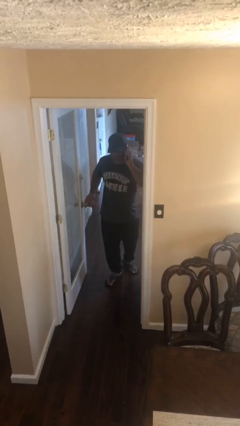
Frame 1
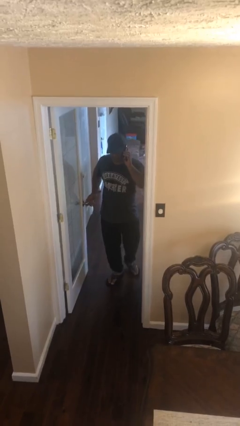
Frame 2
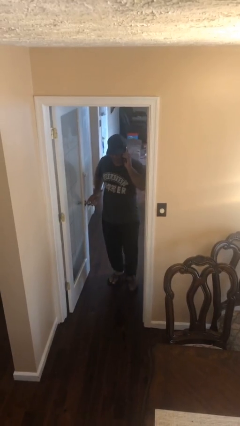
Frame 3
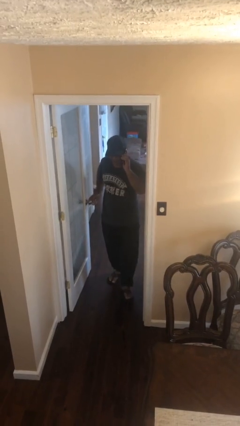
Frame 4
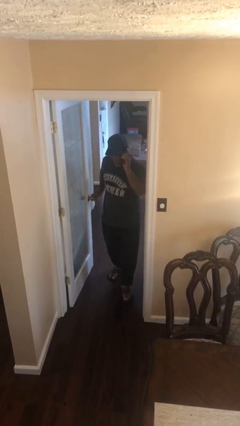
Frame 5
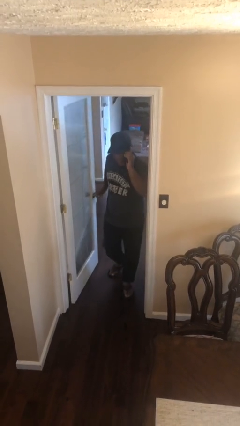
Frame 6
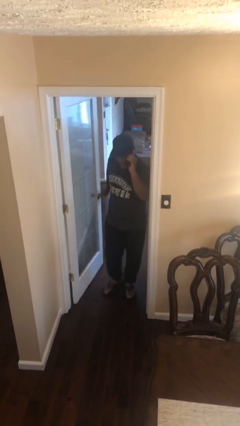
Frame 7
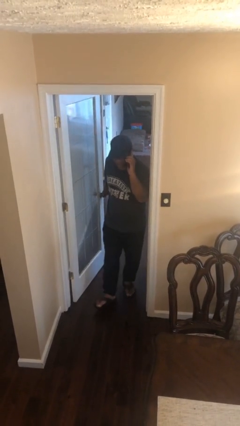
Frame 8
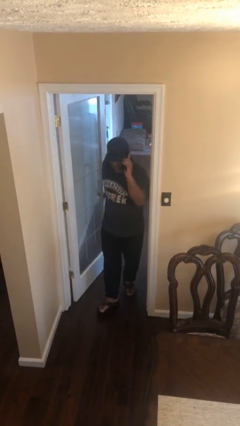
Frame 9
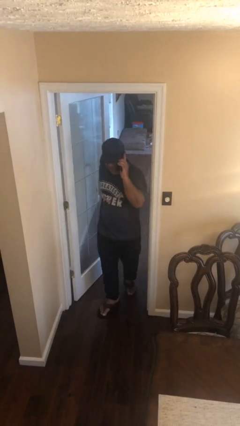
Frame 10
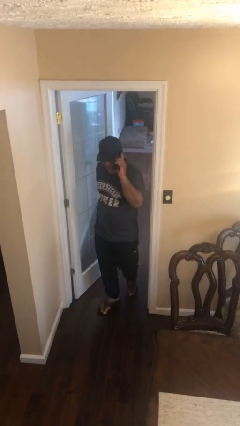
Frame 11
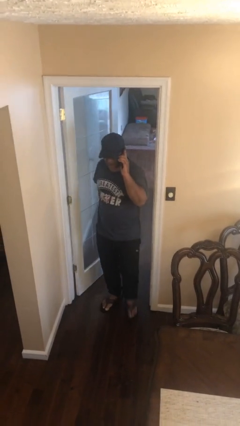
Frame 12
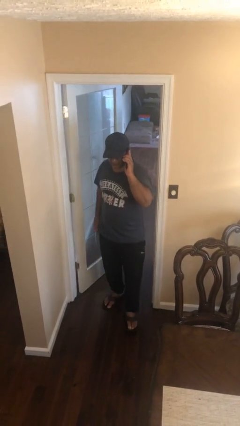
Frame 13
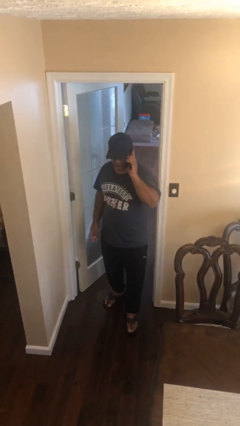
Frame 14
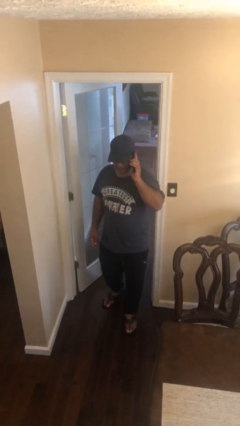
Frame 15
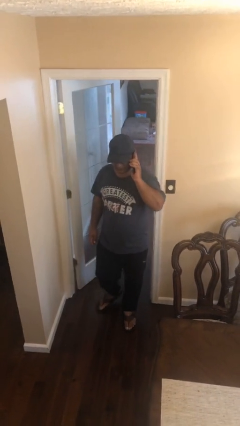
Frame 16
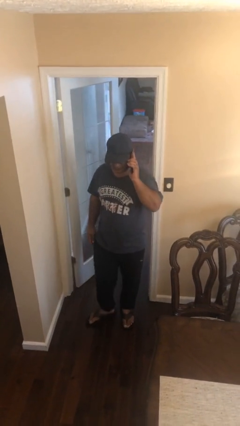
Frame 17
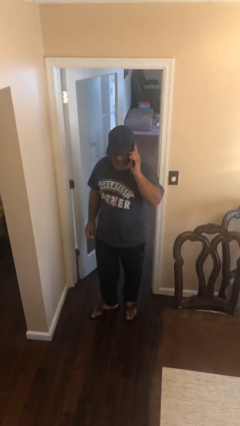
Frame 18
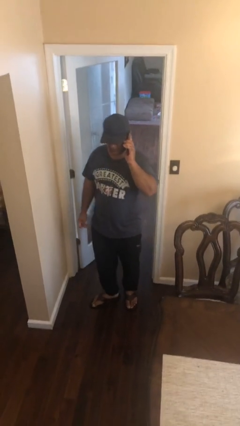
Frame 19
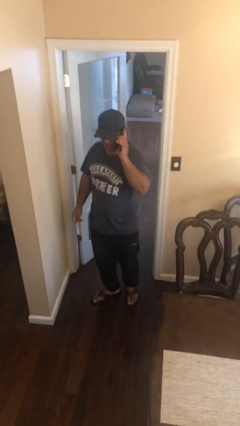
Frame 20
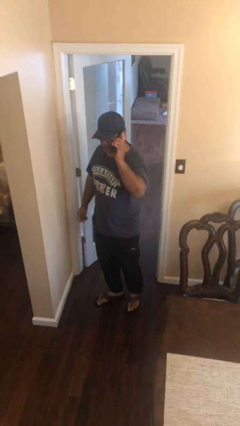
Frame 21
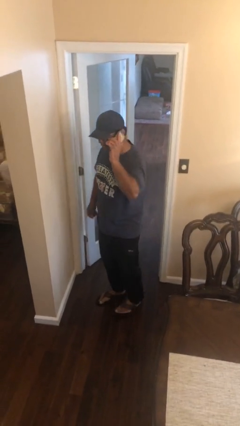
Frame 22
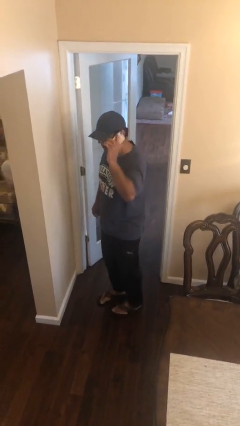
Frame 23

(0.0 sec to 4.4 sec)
person enters scene through structure

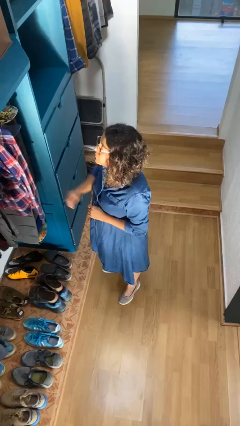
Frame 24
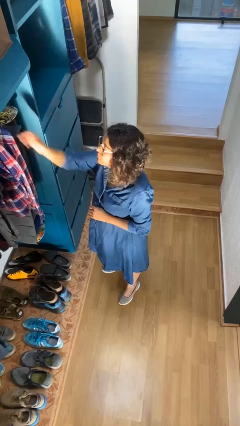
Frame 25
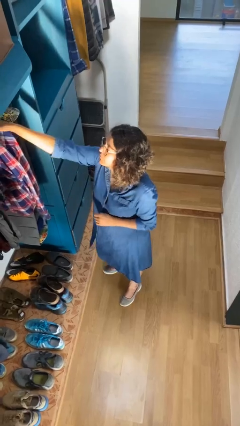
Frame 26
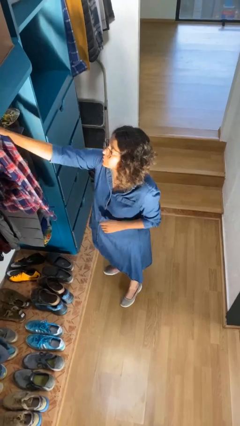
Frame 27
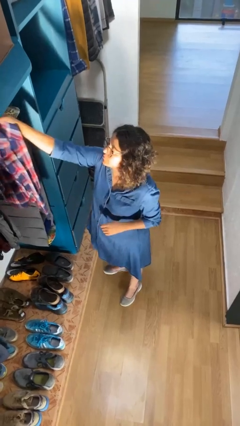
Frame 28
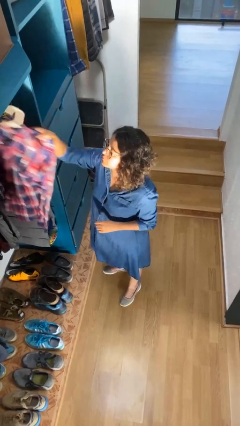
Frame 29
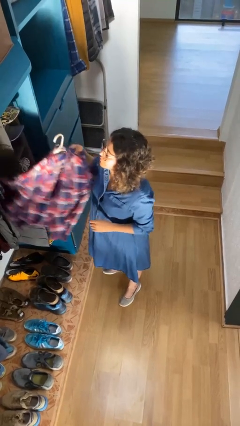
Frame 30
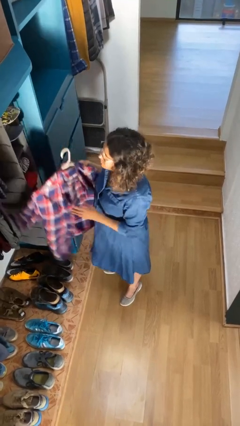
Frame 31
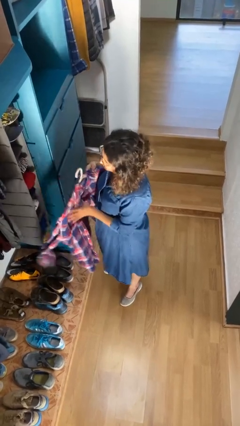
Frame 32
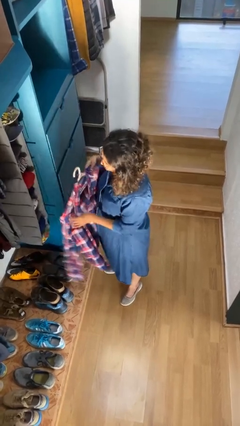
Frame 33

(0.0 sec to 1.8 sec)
person takes clothes from closet

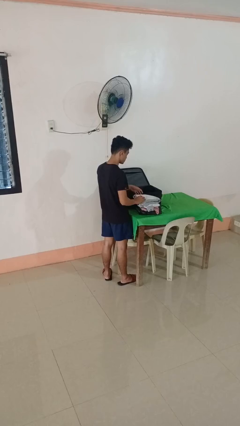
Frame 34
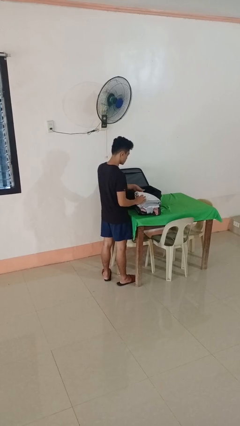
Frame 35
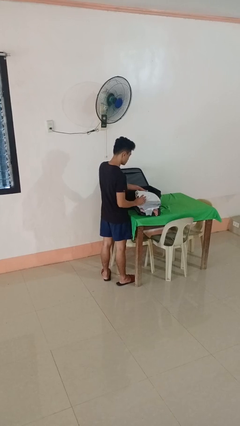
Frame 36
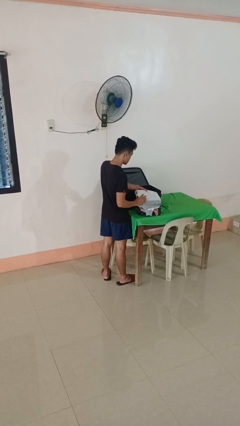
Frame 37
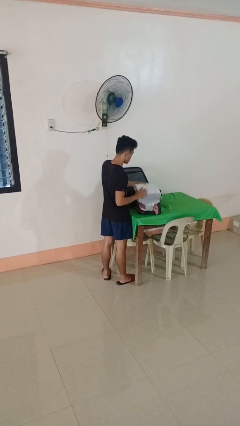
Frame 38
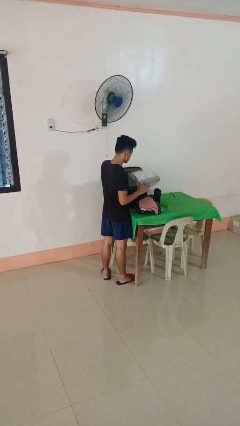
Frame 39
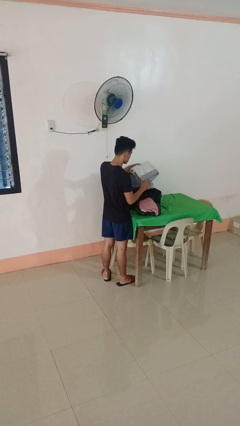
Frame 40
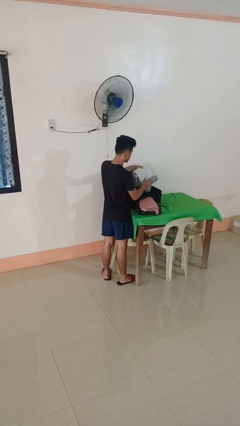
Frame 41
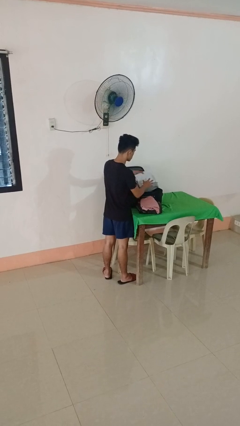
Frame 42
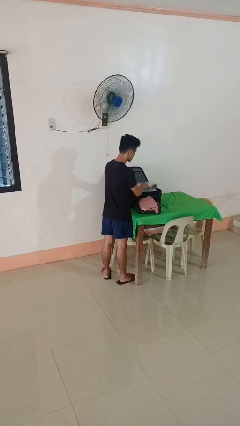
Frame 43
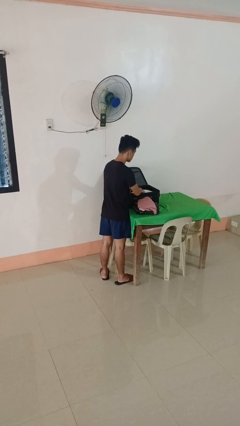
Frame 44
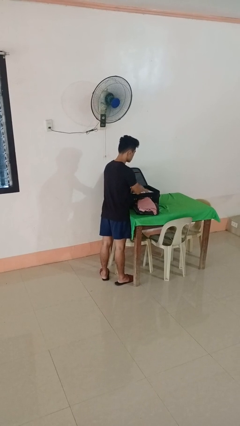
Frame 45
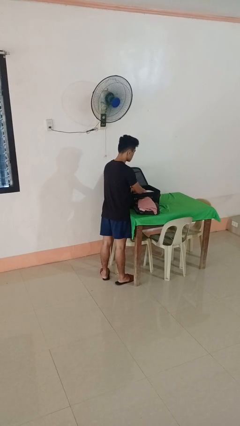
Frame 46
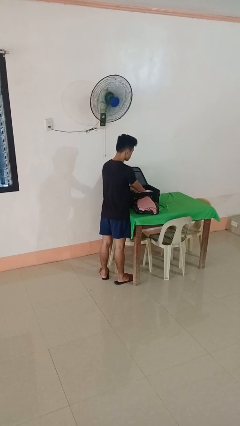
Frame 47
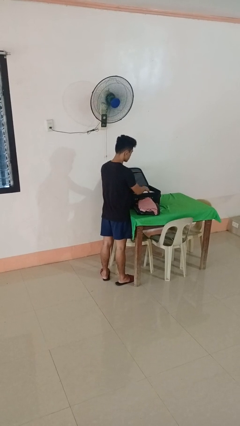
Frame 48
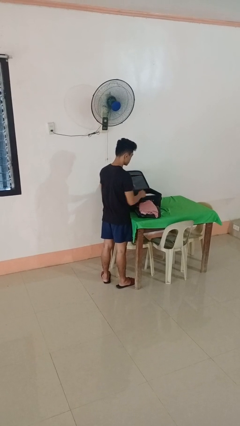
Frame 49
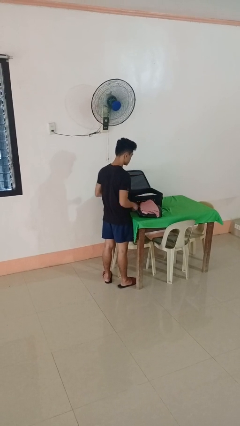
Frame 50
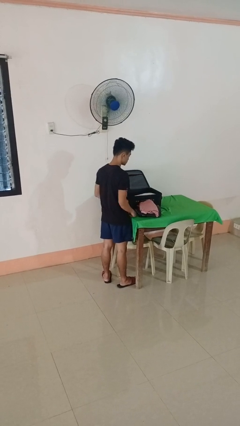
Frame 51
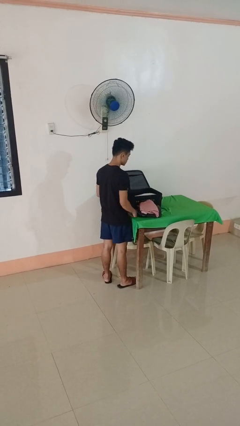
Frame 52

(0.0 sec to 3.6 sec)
person loads clothes into suitcase

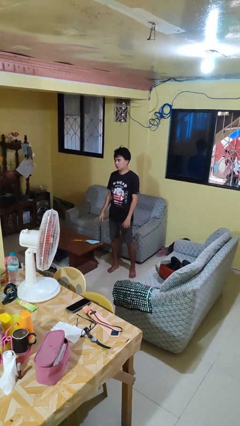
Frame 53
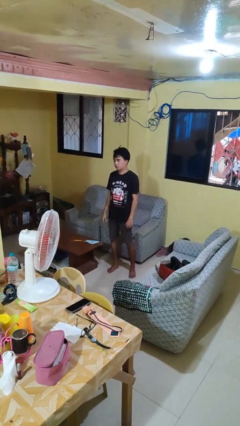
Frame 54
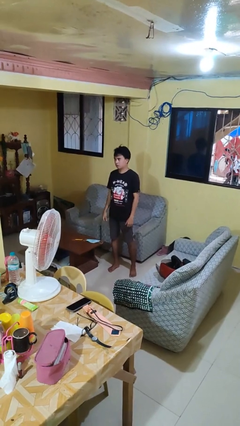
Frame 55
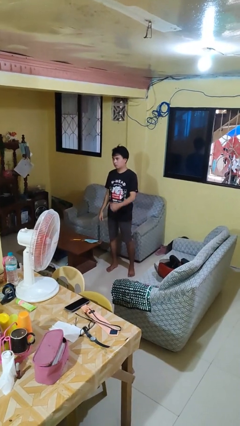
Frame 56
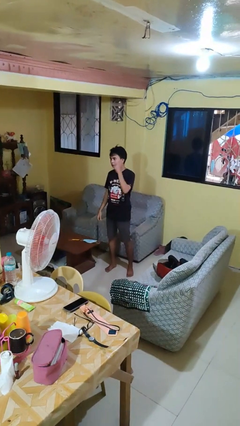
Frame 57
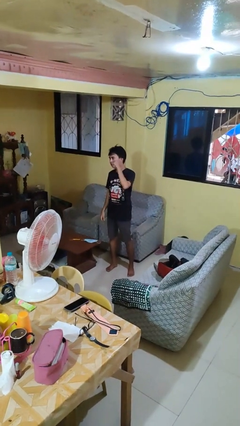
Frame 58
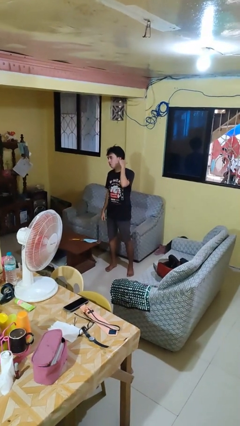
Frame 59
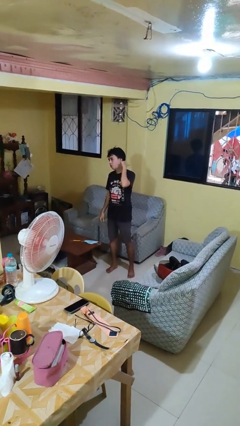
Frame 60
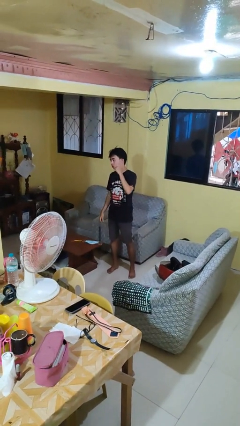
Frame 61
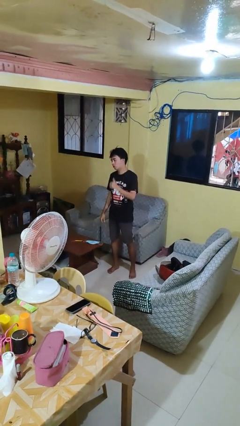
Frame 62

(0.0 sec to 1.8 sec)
person gestures behind me

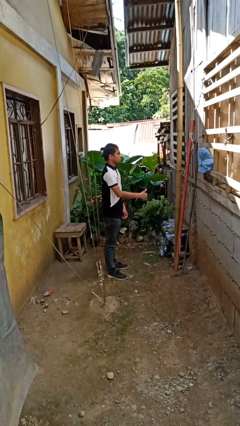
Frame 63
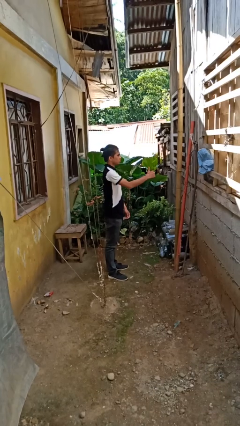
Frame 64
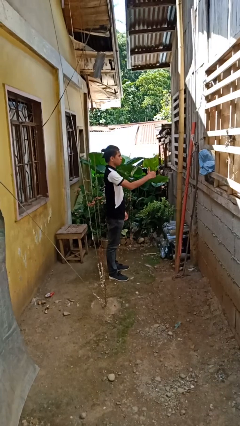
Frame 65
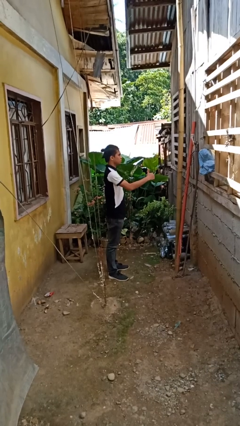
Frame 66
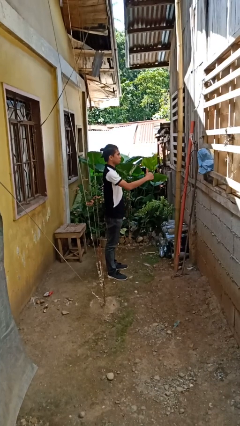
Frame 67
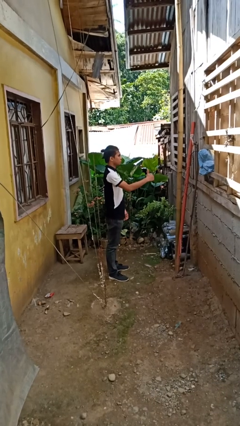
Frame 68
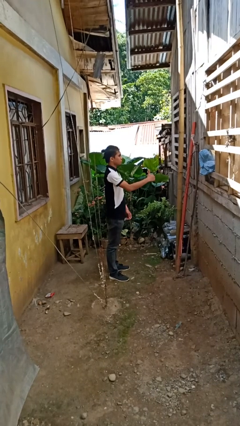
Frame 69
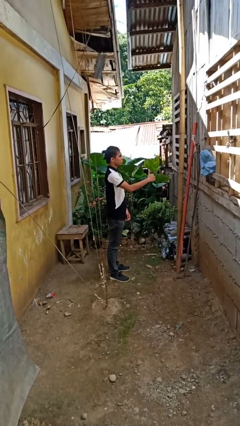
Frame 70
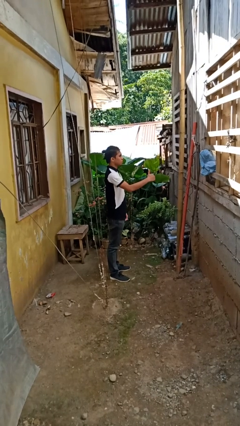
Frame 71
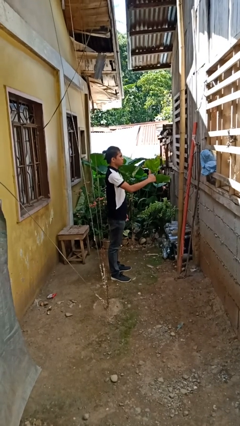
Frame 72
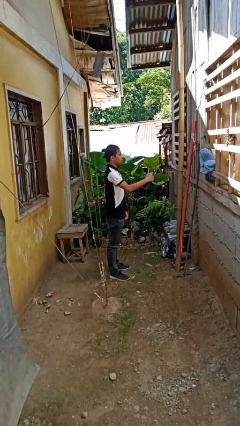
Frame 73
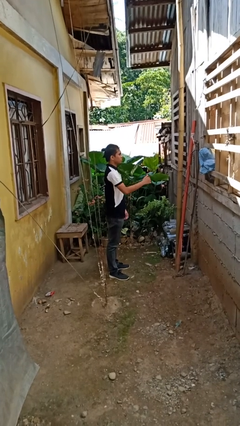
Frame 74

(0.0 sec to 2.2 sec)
person gestures thumbs up

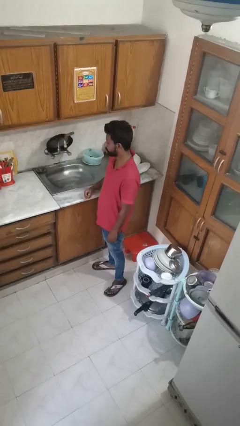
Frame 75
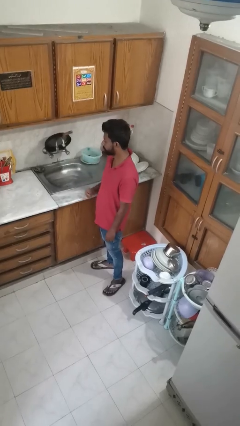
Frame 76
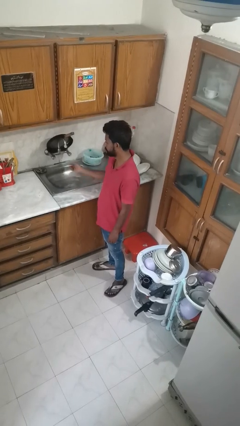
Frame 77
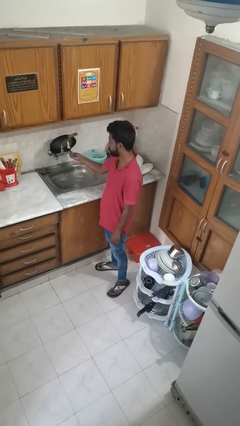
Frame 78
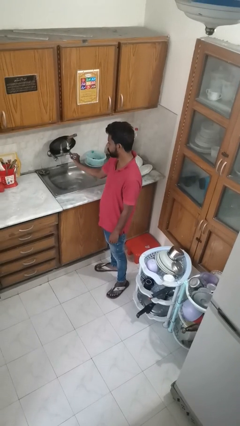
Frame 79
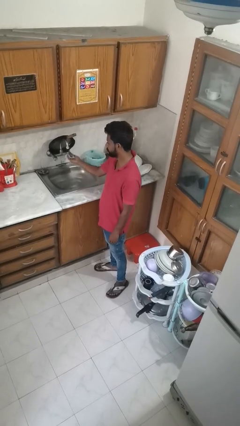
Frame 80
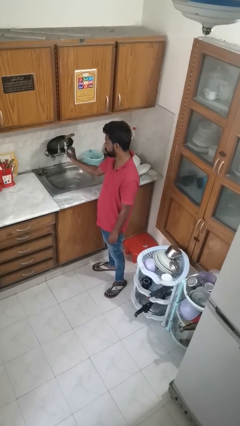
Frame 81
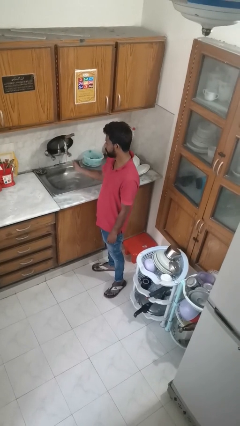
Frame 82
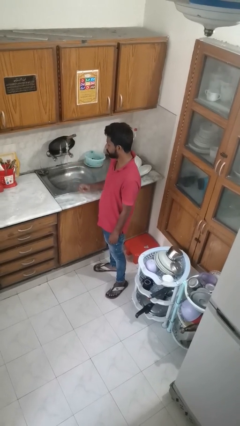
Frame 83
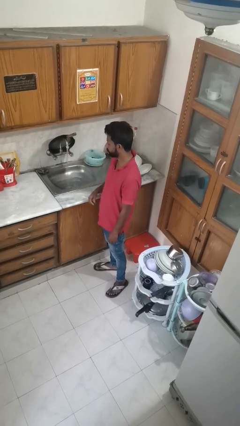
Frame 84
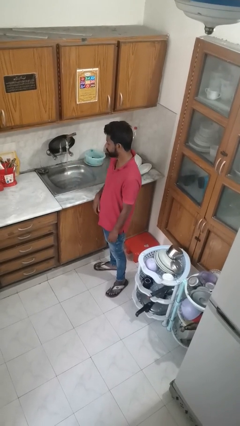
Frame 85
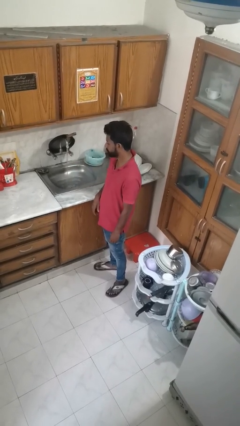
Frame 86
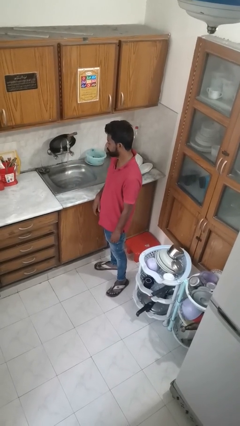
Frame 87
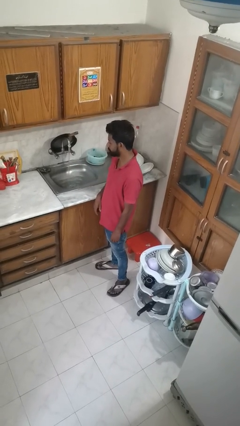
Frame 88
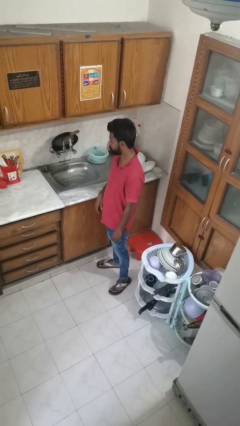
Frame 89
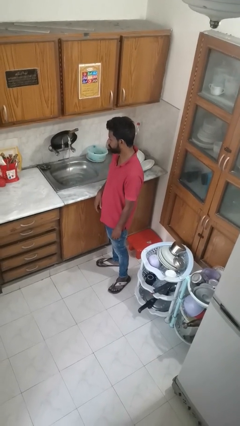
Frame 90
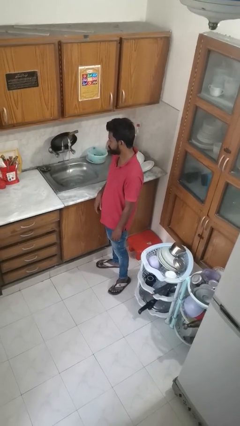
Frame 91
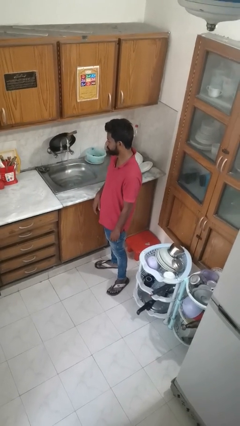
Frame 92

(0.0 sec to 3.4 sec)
person turns on faucet

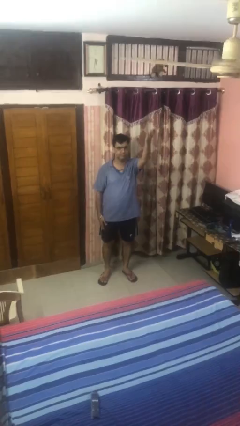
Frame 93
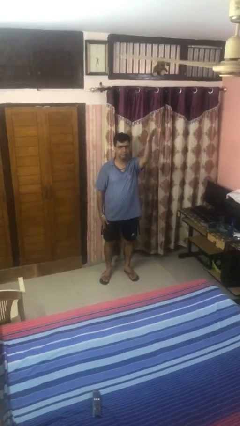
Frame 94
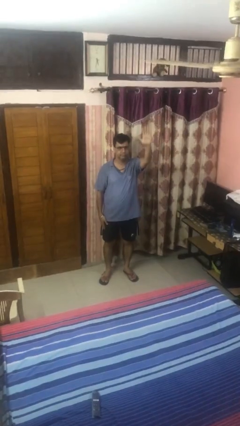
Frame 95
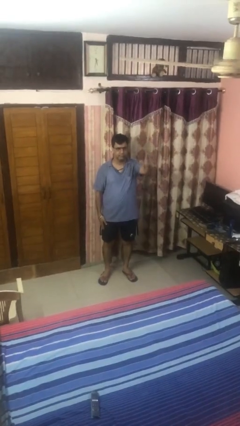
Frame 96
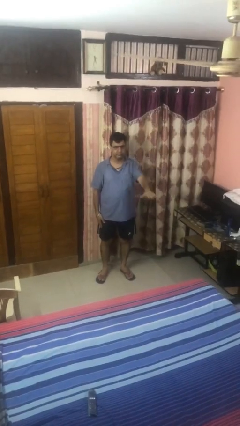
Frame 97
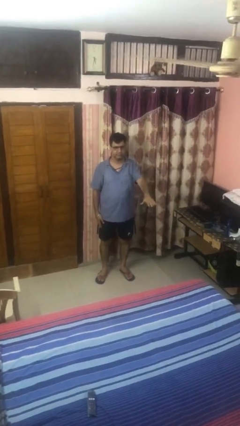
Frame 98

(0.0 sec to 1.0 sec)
person gestures swipe down
